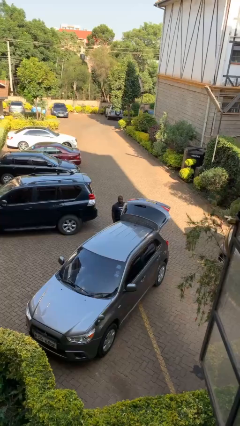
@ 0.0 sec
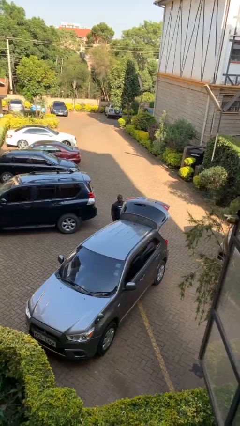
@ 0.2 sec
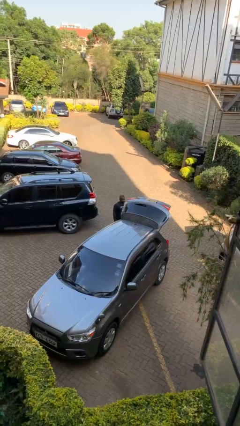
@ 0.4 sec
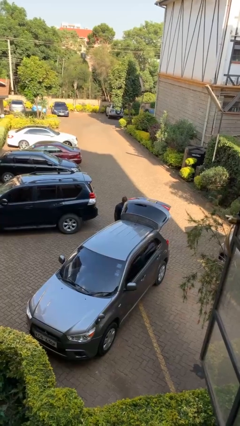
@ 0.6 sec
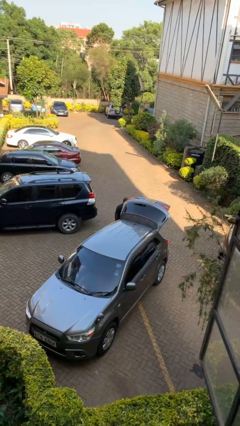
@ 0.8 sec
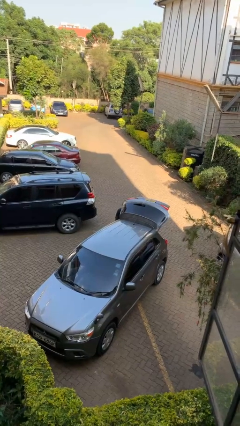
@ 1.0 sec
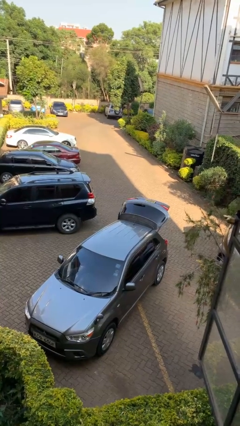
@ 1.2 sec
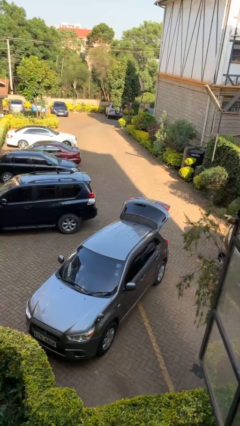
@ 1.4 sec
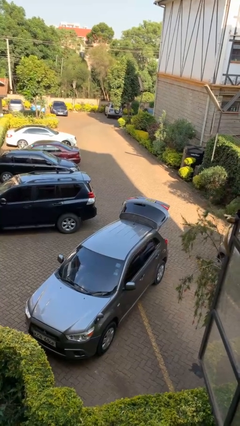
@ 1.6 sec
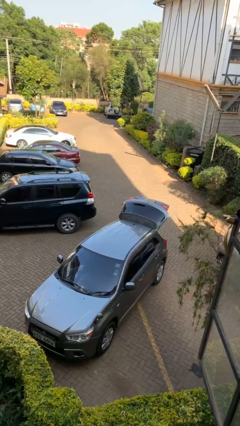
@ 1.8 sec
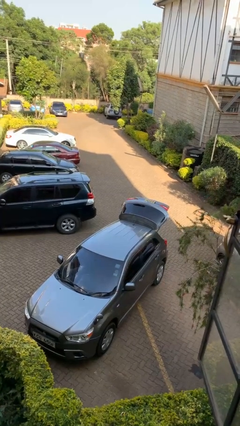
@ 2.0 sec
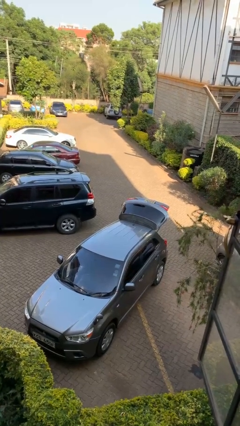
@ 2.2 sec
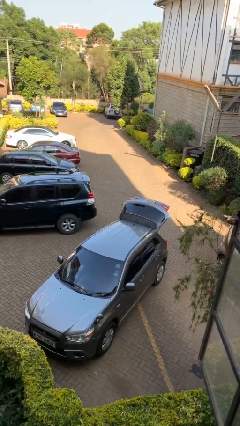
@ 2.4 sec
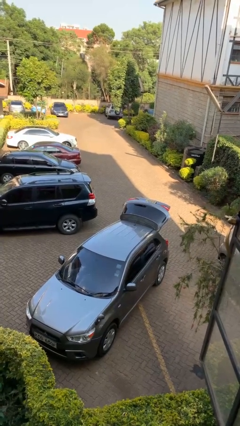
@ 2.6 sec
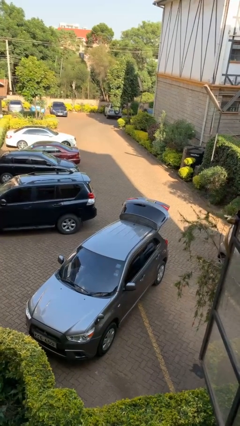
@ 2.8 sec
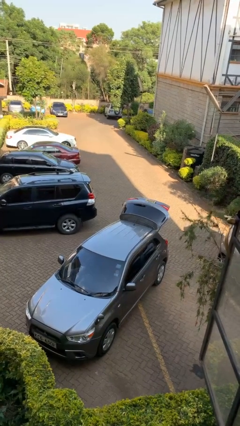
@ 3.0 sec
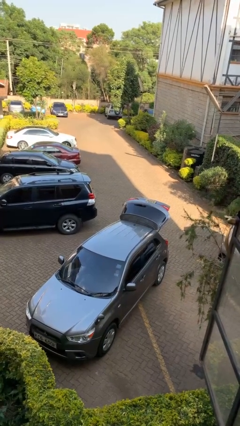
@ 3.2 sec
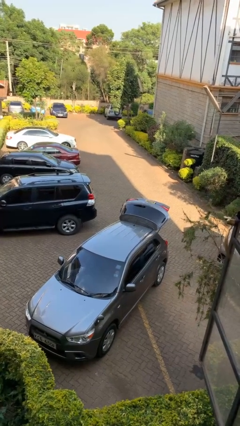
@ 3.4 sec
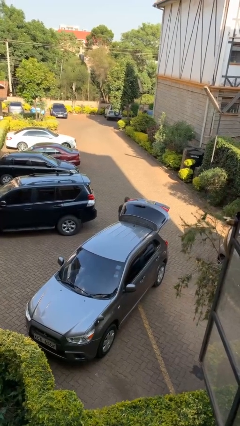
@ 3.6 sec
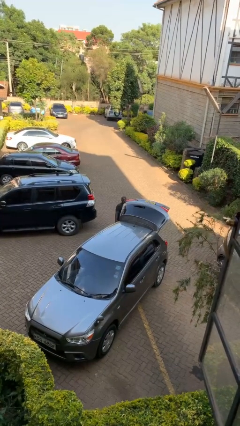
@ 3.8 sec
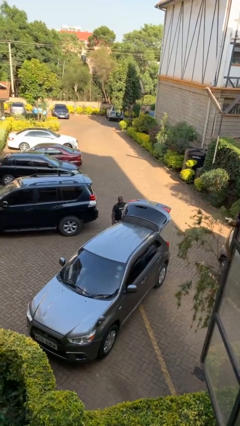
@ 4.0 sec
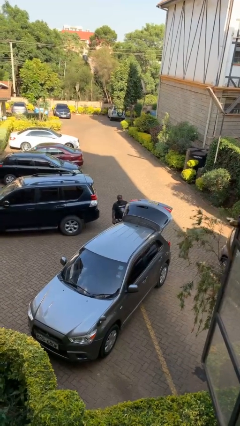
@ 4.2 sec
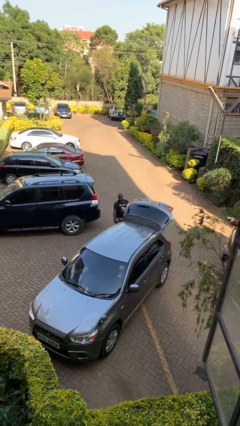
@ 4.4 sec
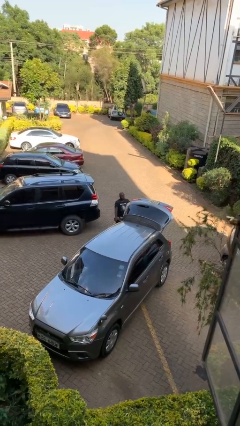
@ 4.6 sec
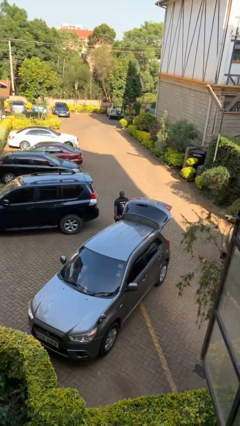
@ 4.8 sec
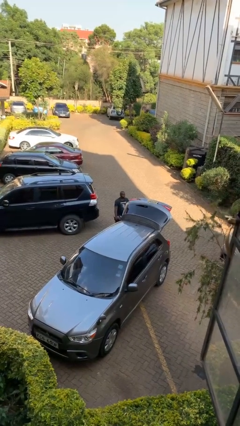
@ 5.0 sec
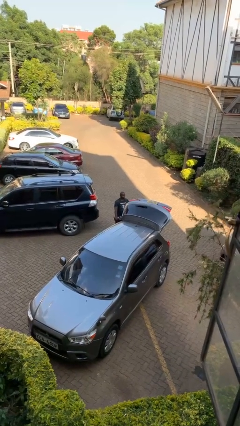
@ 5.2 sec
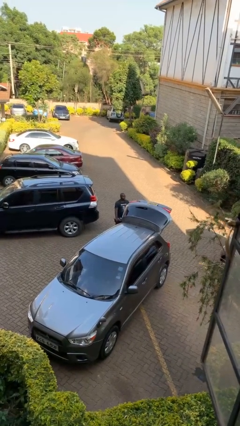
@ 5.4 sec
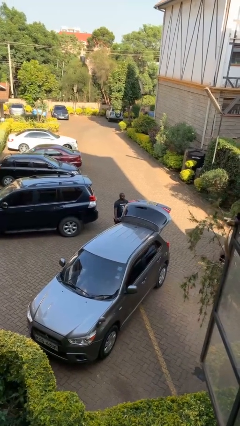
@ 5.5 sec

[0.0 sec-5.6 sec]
person unloads car

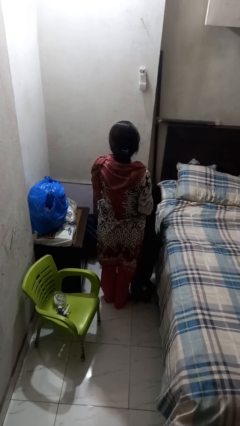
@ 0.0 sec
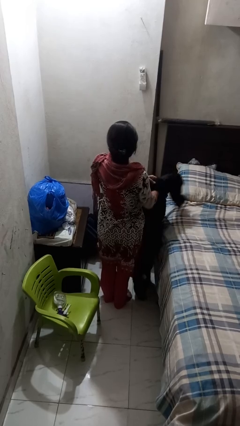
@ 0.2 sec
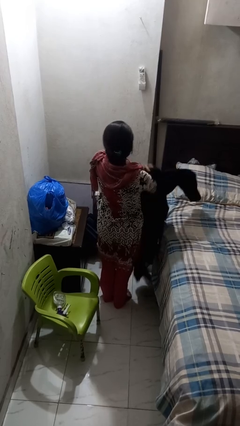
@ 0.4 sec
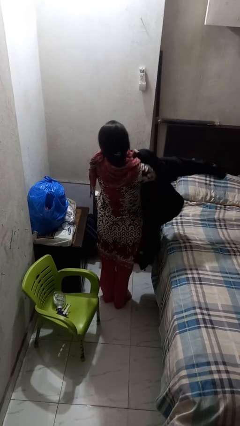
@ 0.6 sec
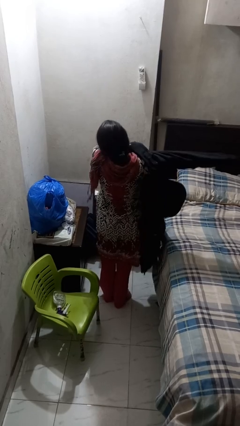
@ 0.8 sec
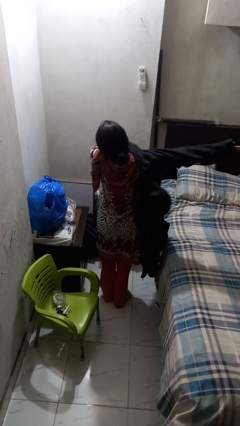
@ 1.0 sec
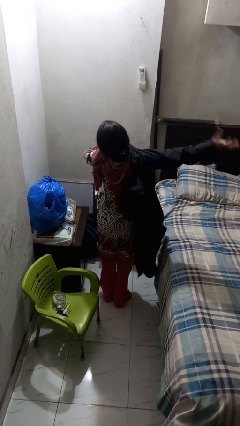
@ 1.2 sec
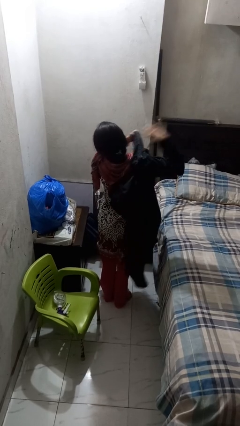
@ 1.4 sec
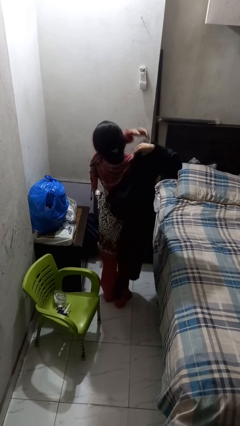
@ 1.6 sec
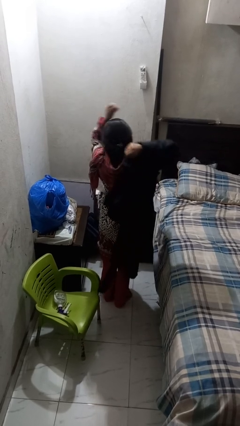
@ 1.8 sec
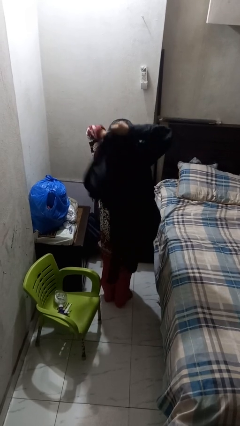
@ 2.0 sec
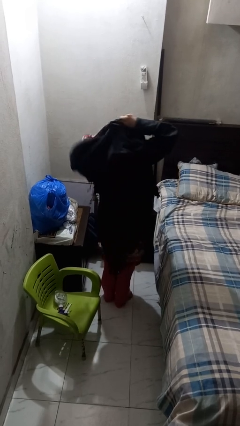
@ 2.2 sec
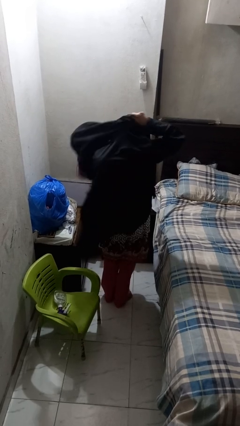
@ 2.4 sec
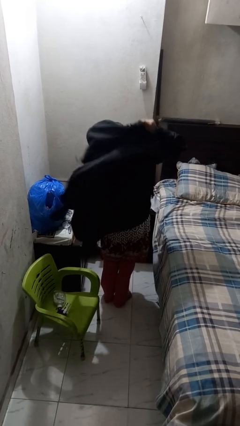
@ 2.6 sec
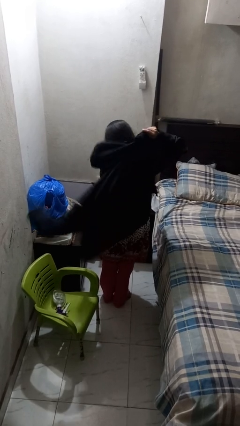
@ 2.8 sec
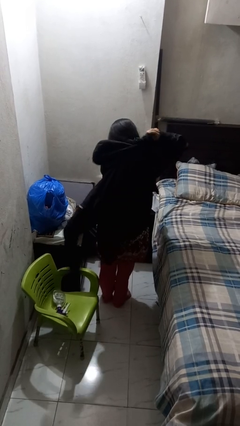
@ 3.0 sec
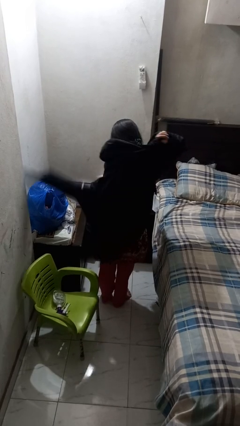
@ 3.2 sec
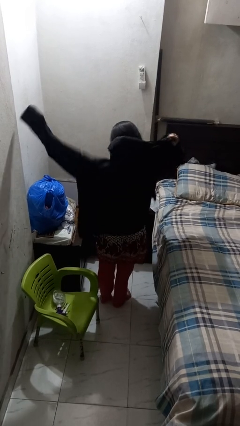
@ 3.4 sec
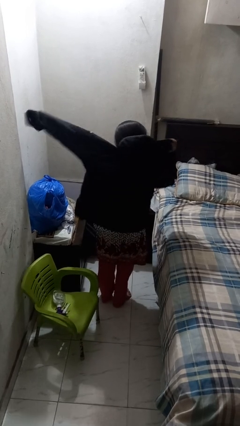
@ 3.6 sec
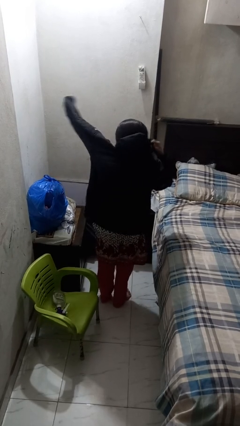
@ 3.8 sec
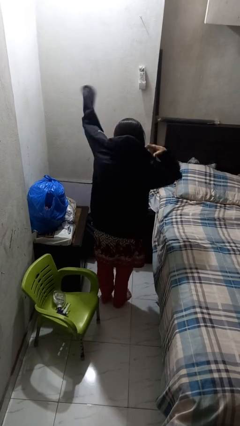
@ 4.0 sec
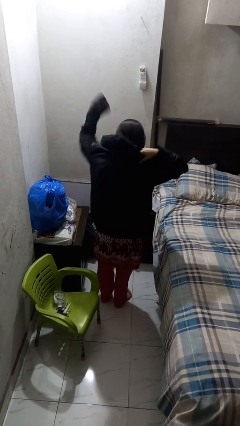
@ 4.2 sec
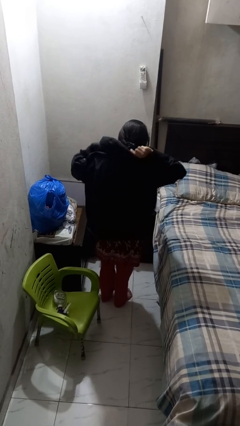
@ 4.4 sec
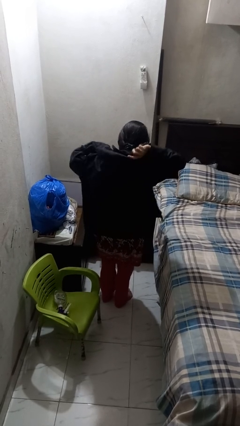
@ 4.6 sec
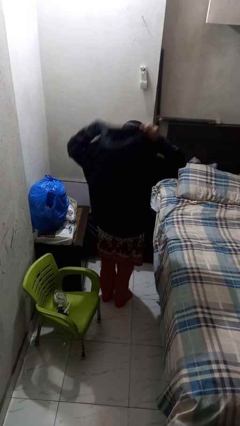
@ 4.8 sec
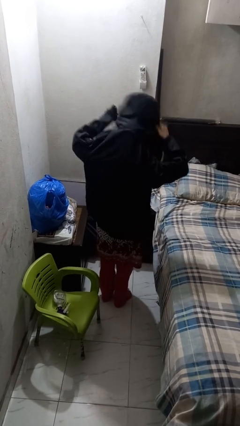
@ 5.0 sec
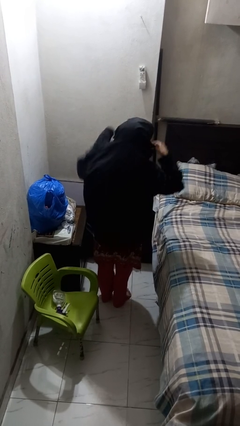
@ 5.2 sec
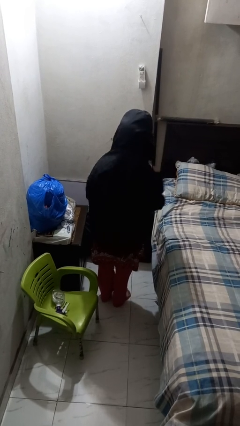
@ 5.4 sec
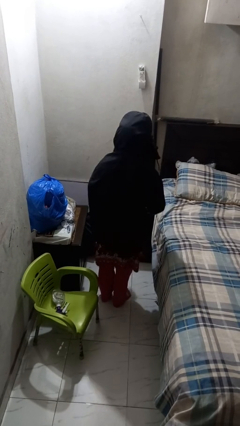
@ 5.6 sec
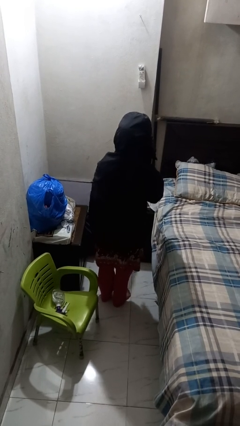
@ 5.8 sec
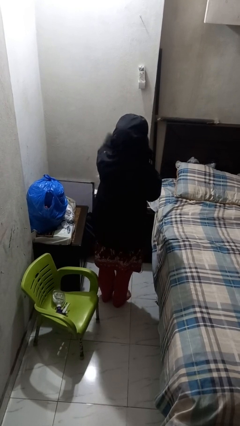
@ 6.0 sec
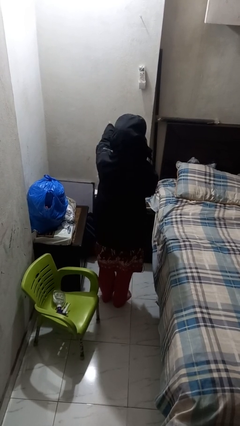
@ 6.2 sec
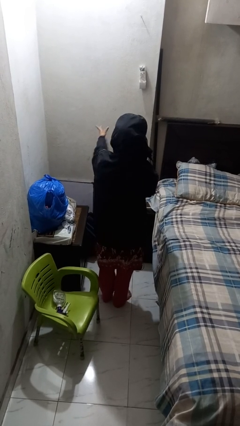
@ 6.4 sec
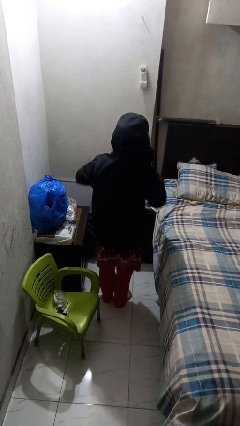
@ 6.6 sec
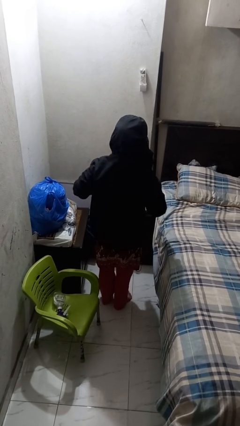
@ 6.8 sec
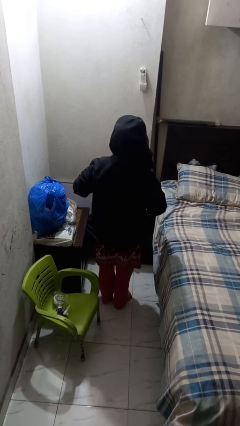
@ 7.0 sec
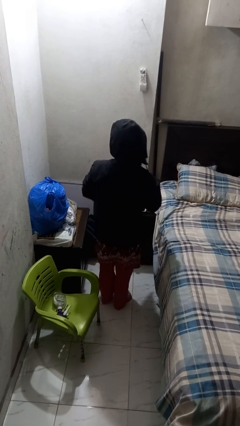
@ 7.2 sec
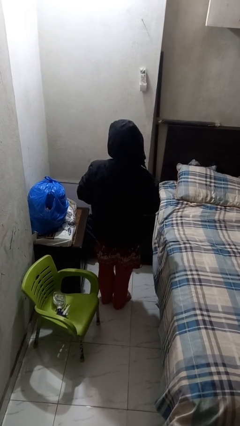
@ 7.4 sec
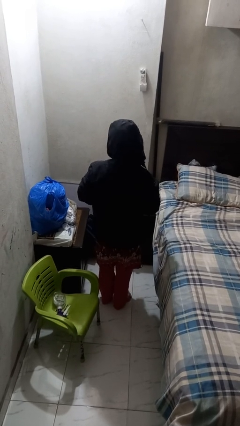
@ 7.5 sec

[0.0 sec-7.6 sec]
person puts on hoodie

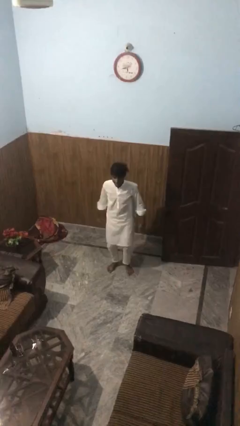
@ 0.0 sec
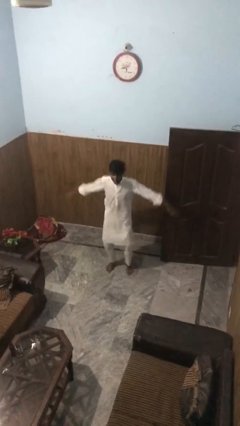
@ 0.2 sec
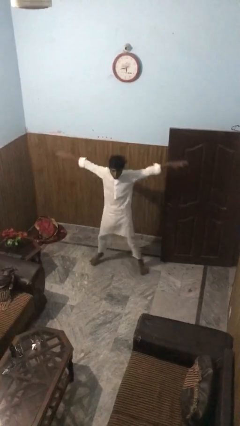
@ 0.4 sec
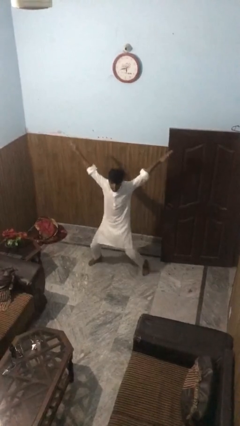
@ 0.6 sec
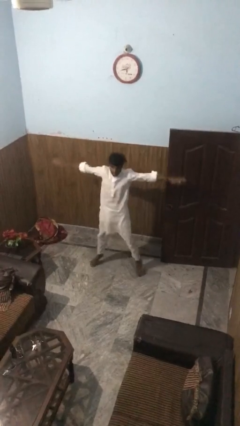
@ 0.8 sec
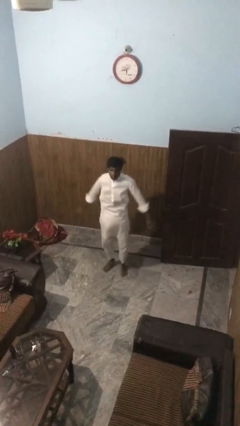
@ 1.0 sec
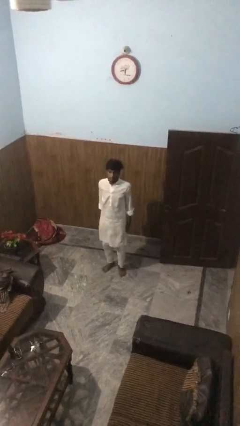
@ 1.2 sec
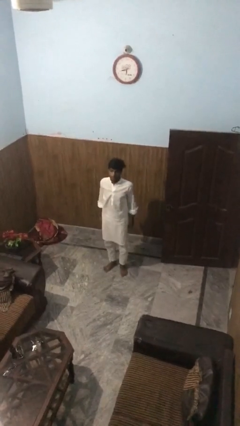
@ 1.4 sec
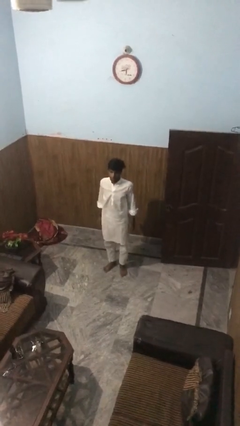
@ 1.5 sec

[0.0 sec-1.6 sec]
person exercises with jumping jacks

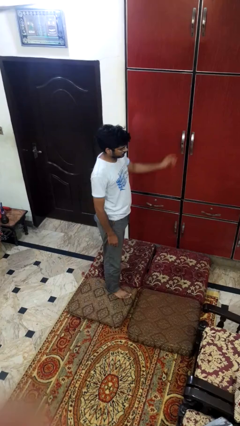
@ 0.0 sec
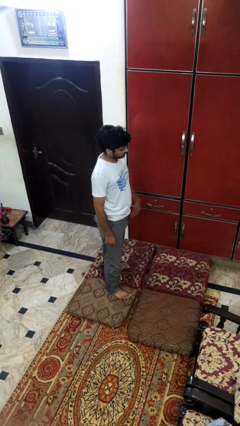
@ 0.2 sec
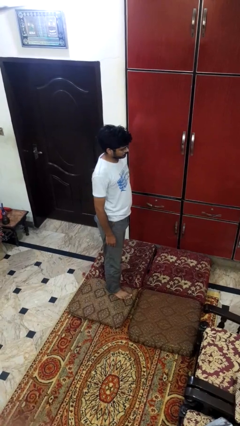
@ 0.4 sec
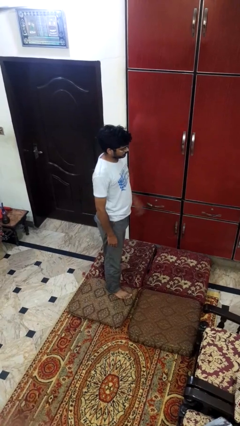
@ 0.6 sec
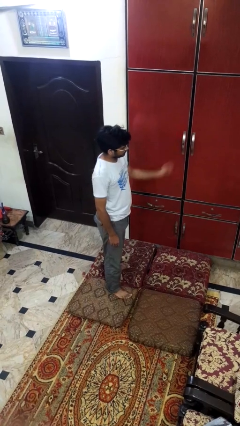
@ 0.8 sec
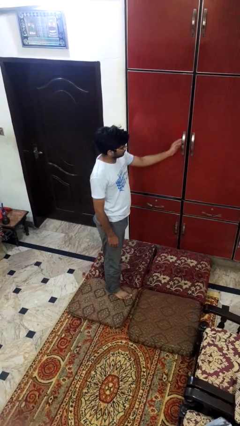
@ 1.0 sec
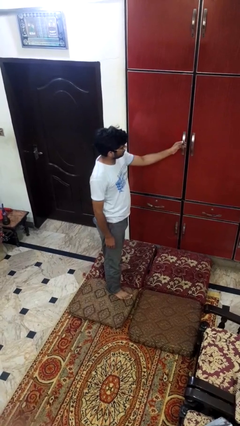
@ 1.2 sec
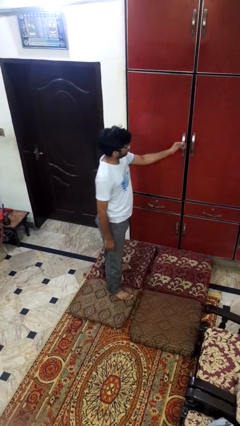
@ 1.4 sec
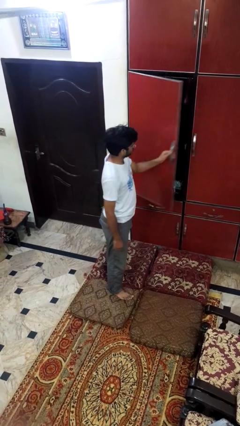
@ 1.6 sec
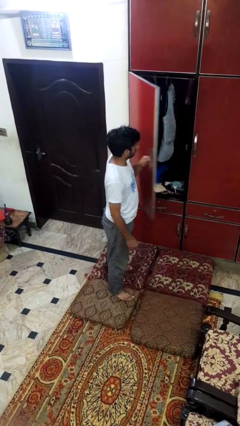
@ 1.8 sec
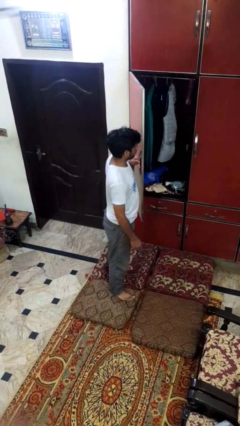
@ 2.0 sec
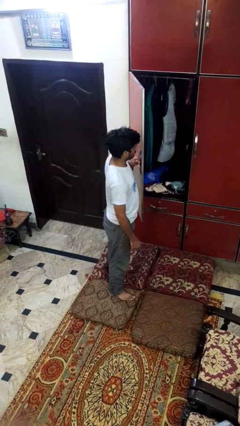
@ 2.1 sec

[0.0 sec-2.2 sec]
person opens closet door

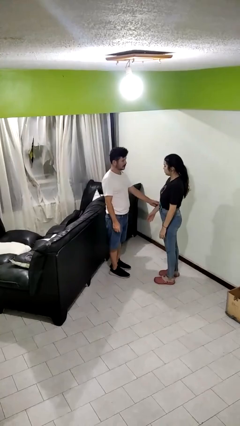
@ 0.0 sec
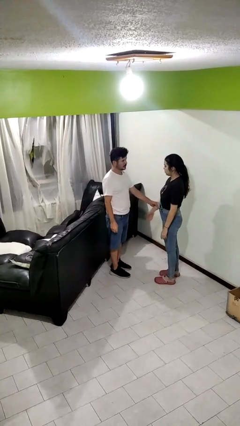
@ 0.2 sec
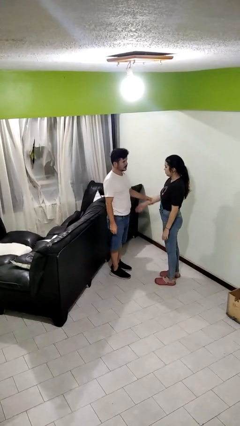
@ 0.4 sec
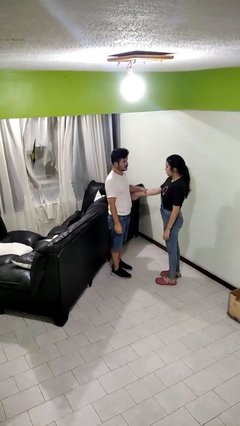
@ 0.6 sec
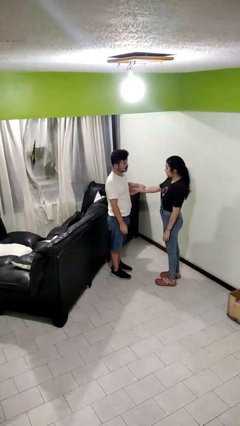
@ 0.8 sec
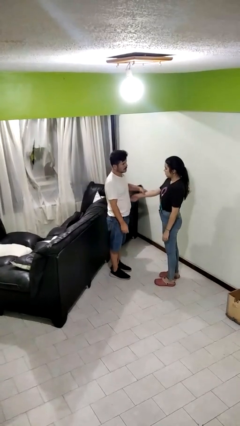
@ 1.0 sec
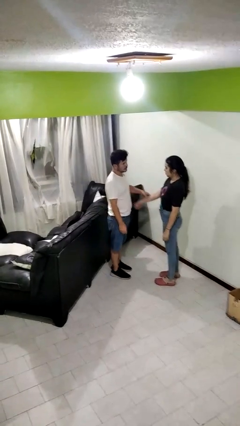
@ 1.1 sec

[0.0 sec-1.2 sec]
person grabs person by forearm
